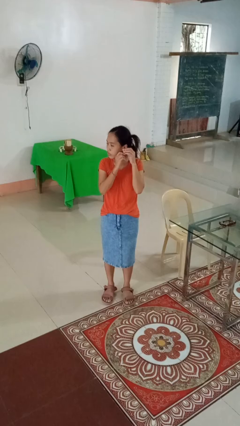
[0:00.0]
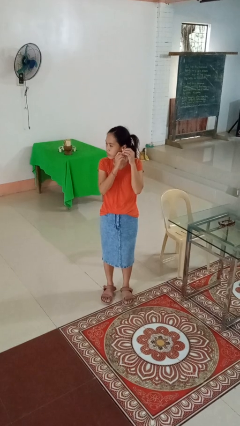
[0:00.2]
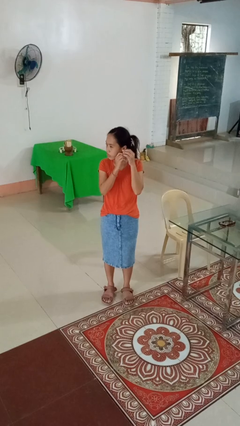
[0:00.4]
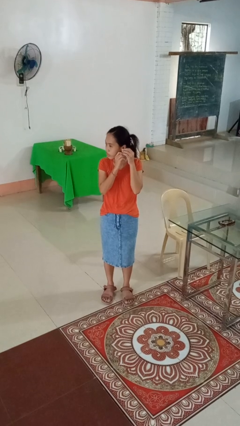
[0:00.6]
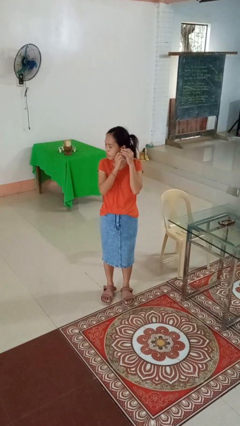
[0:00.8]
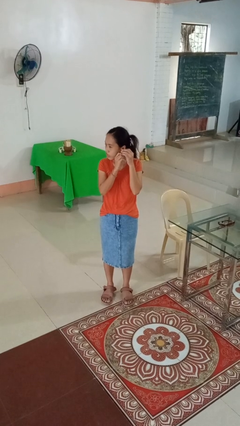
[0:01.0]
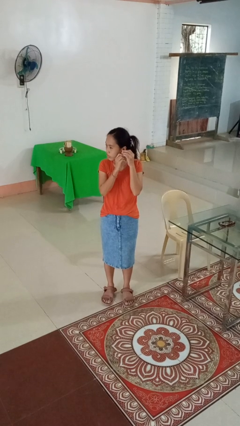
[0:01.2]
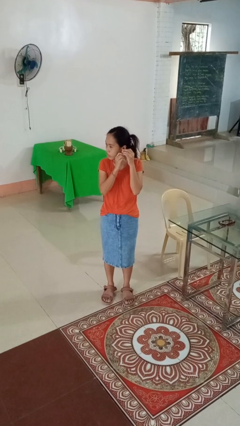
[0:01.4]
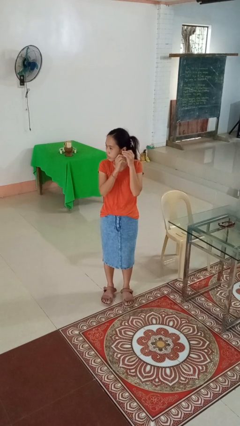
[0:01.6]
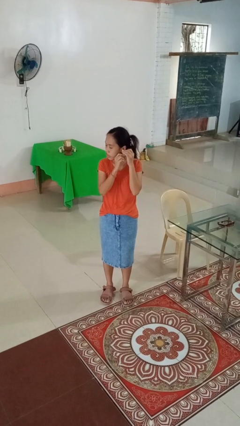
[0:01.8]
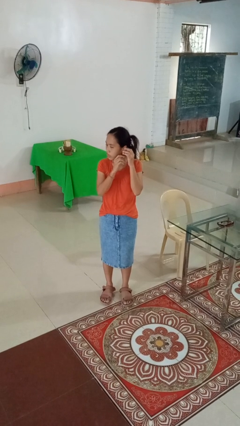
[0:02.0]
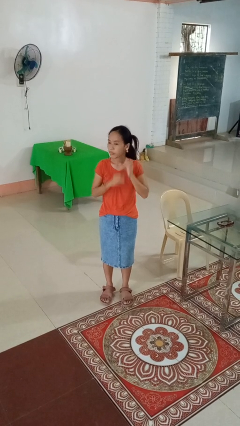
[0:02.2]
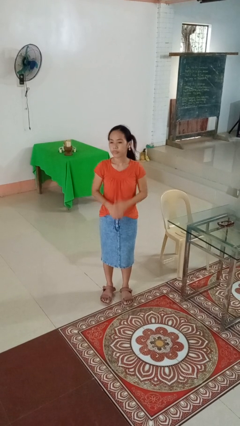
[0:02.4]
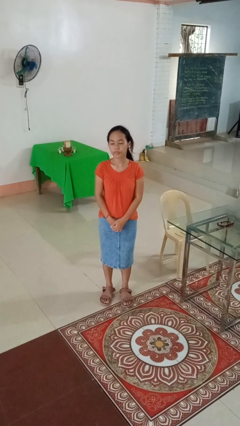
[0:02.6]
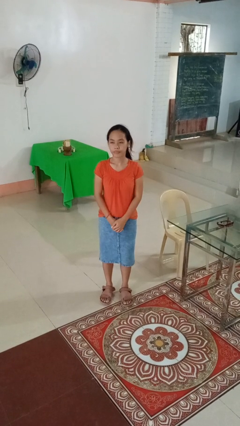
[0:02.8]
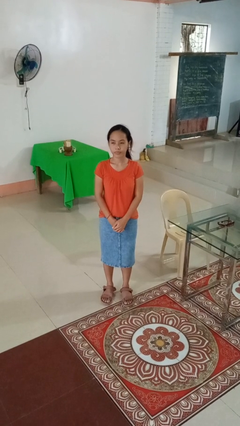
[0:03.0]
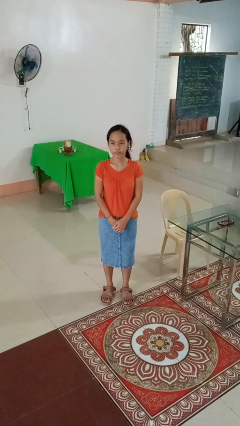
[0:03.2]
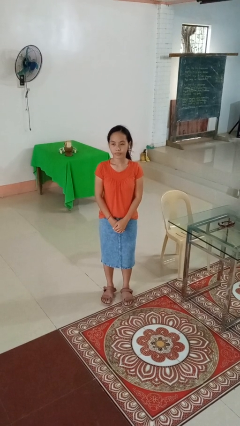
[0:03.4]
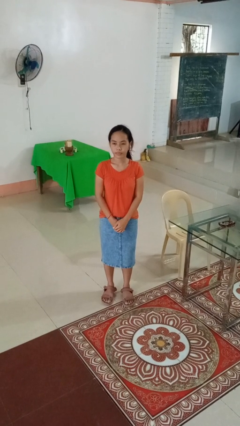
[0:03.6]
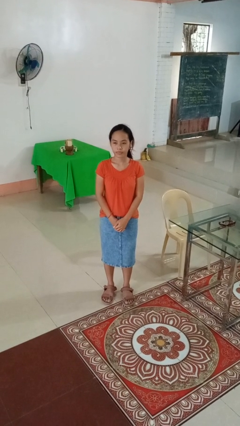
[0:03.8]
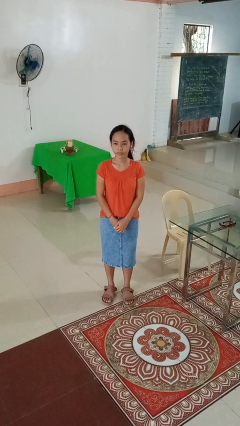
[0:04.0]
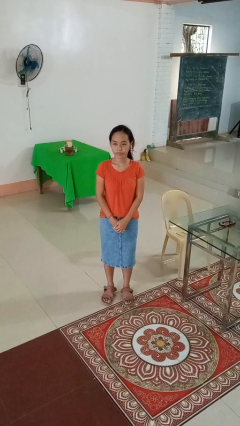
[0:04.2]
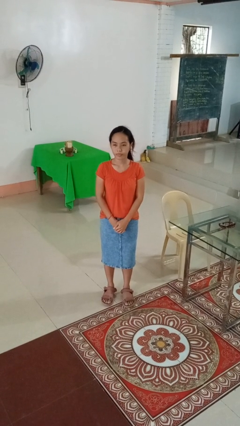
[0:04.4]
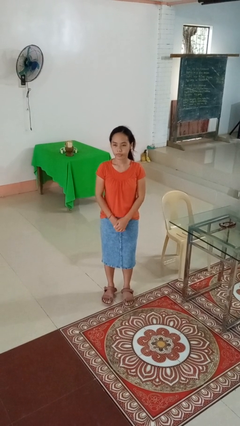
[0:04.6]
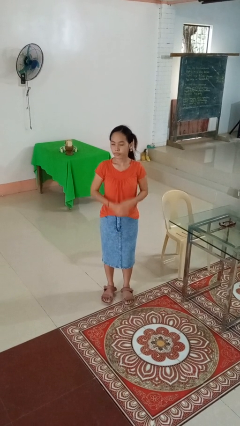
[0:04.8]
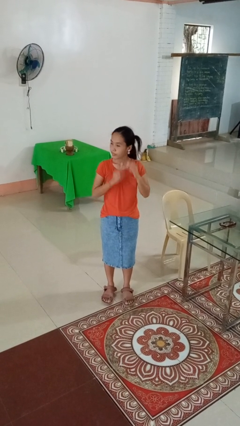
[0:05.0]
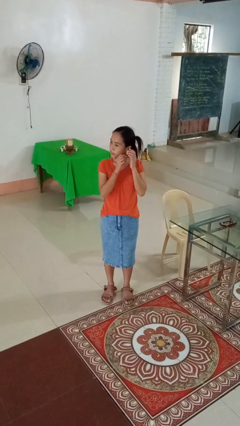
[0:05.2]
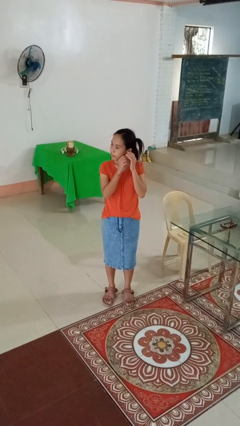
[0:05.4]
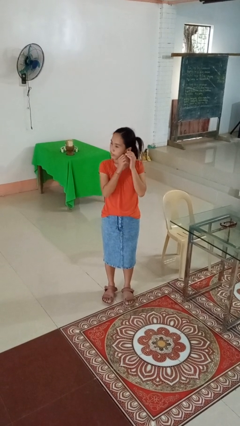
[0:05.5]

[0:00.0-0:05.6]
person puts on earrings

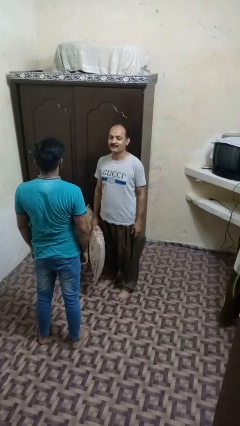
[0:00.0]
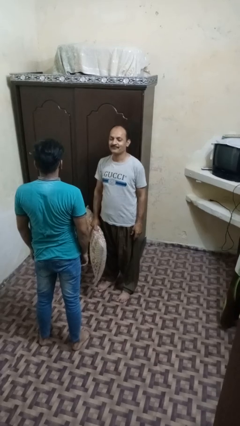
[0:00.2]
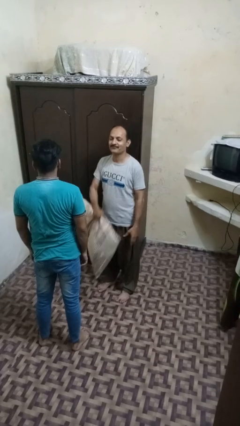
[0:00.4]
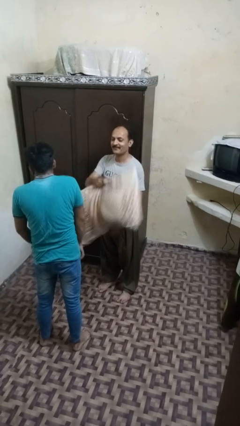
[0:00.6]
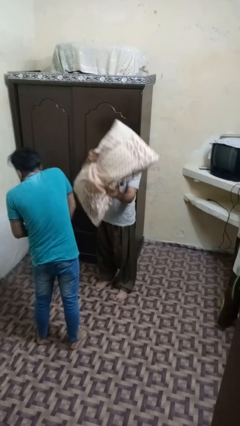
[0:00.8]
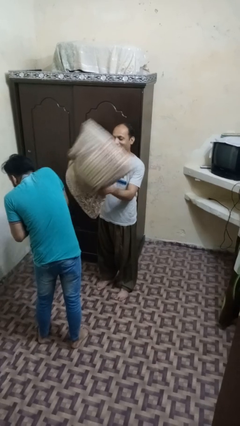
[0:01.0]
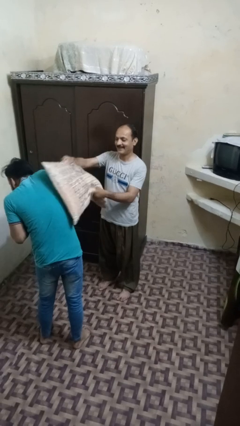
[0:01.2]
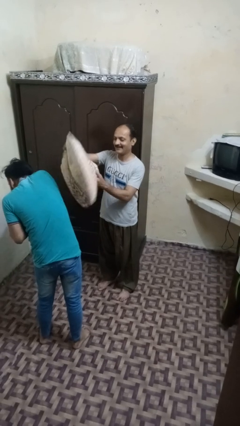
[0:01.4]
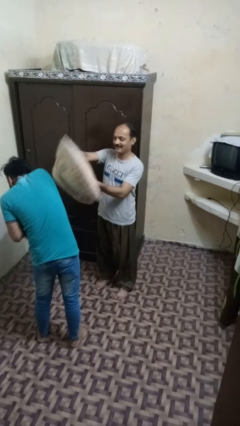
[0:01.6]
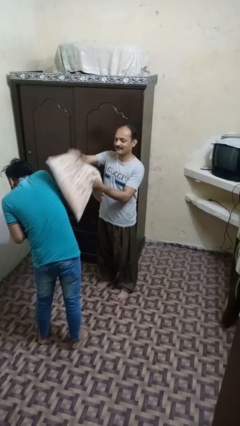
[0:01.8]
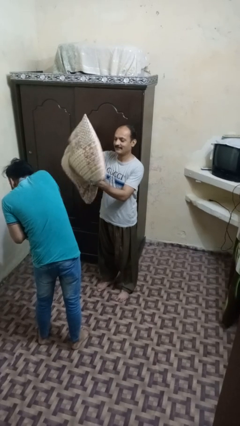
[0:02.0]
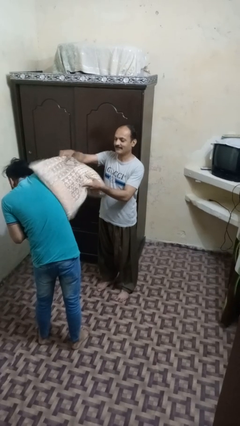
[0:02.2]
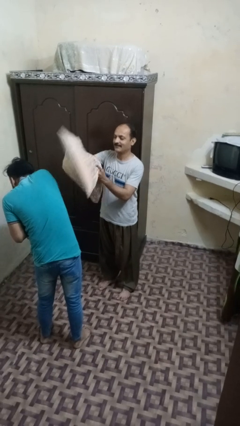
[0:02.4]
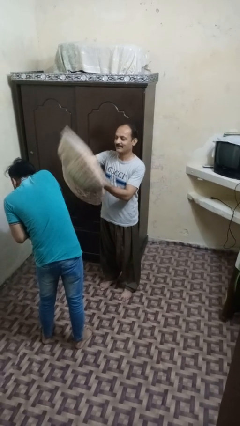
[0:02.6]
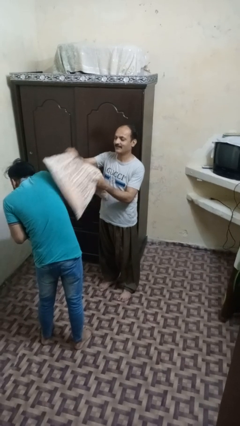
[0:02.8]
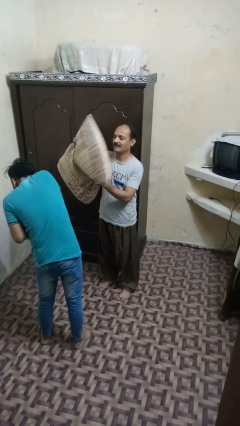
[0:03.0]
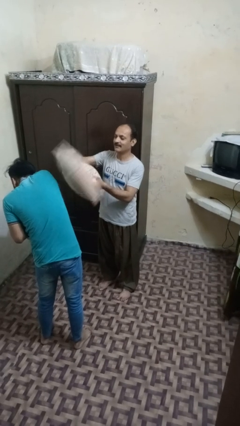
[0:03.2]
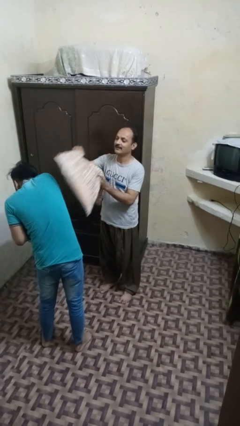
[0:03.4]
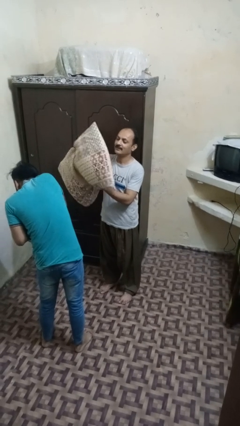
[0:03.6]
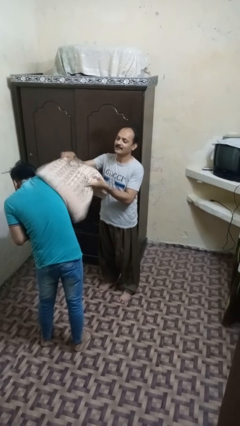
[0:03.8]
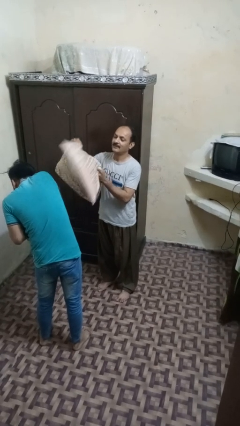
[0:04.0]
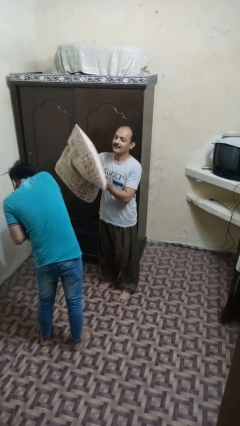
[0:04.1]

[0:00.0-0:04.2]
person hits person with pillow

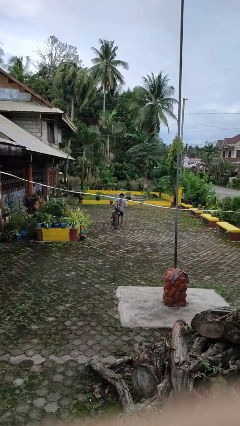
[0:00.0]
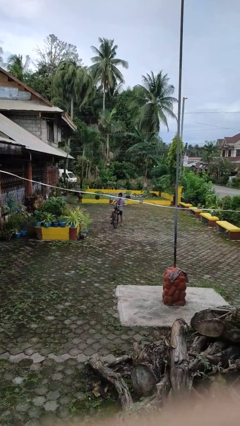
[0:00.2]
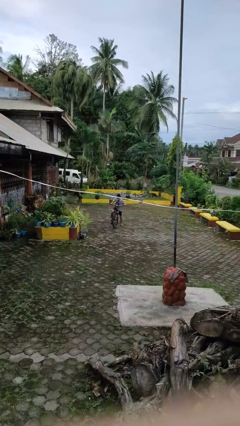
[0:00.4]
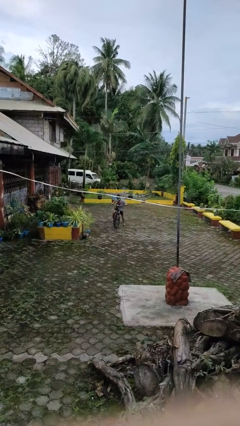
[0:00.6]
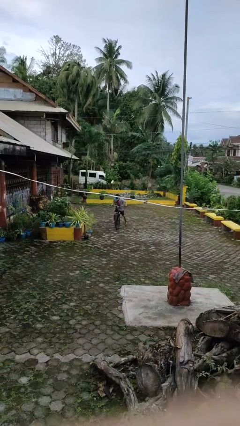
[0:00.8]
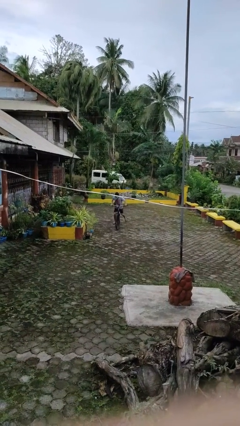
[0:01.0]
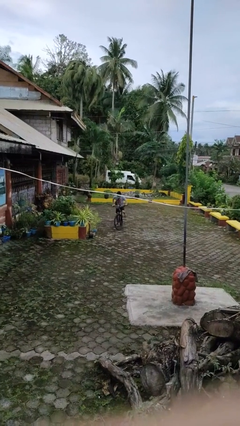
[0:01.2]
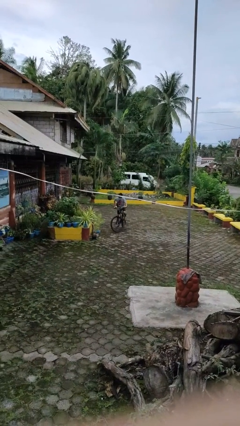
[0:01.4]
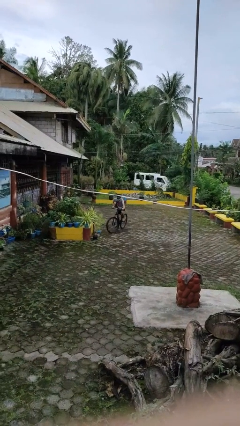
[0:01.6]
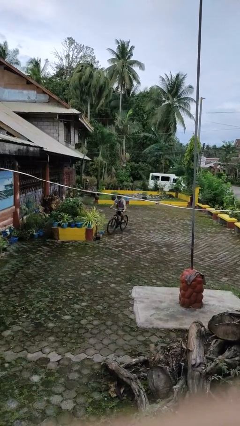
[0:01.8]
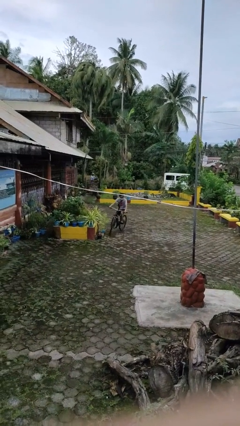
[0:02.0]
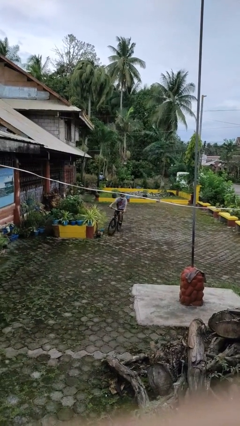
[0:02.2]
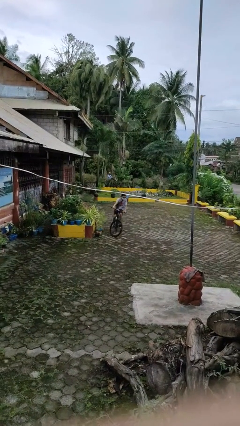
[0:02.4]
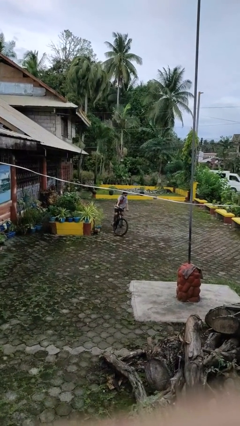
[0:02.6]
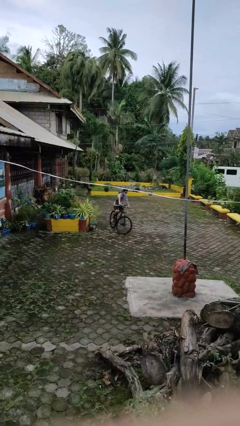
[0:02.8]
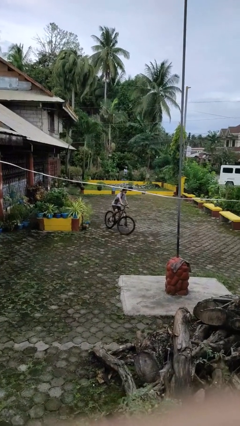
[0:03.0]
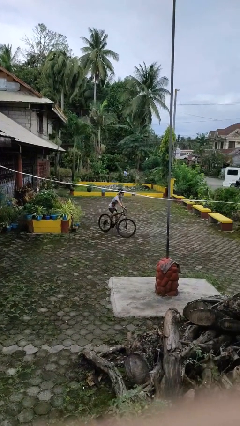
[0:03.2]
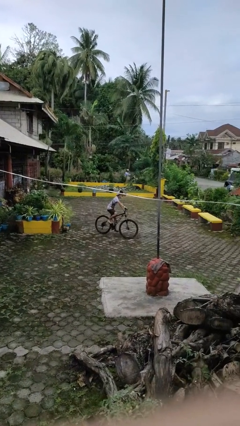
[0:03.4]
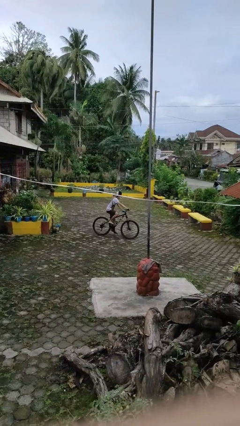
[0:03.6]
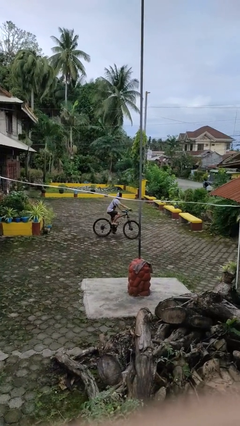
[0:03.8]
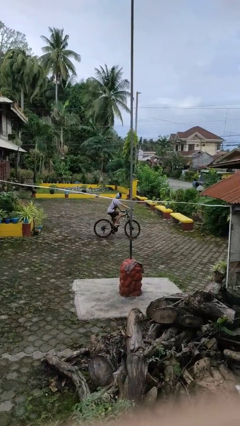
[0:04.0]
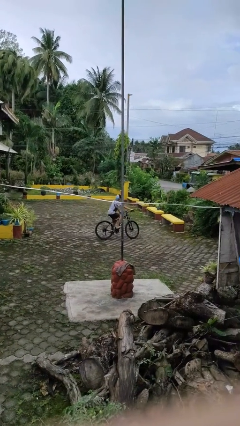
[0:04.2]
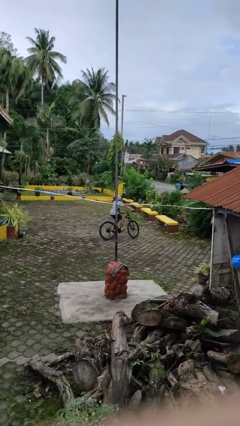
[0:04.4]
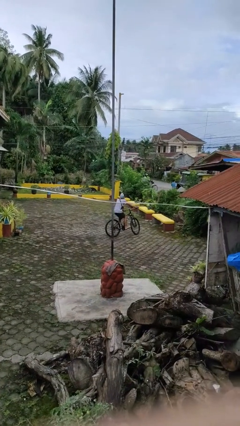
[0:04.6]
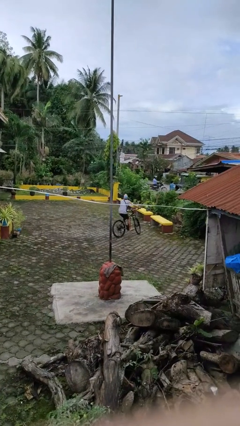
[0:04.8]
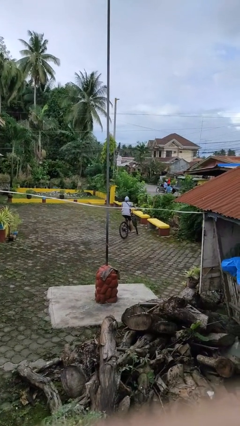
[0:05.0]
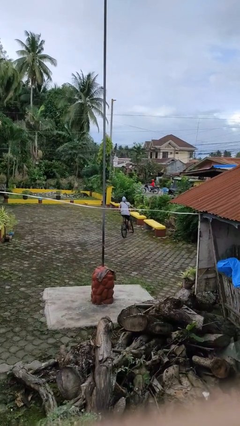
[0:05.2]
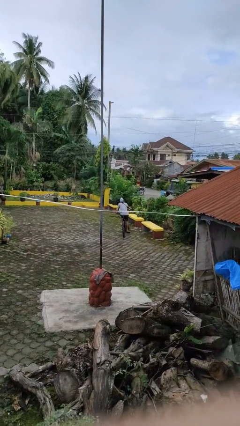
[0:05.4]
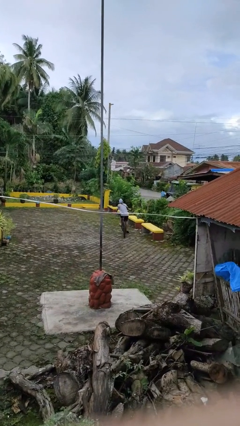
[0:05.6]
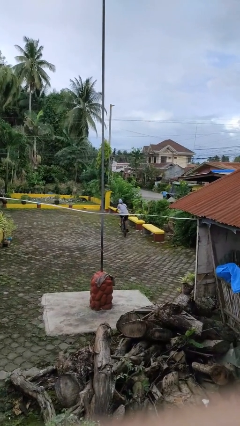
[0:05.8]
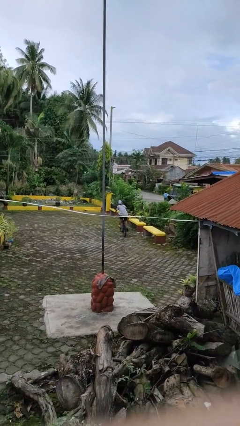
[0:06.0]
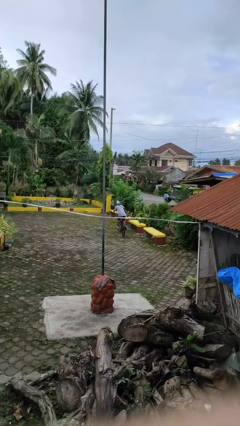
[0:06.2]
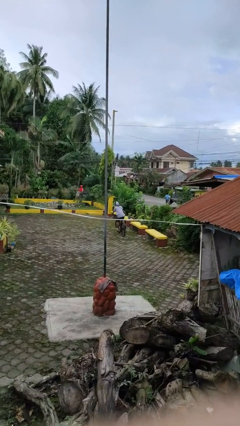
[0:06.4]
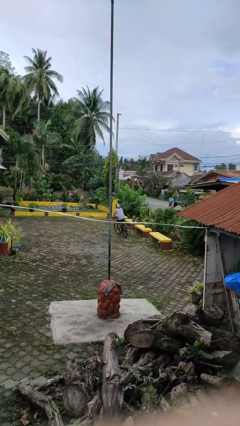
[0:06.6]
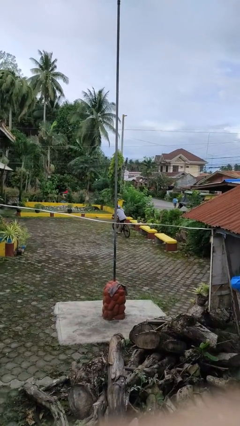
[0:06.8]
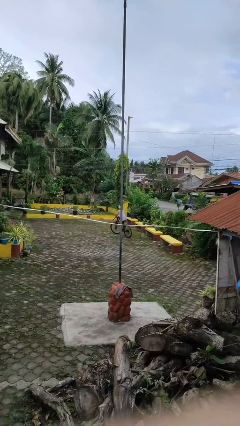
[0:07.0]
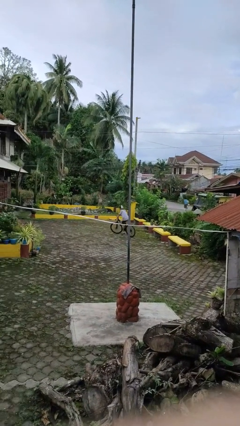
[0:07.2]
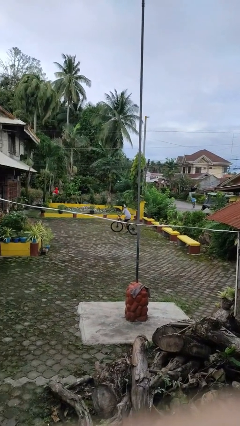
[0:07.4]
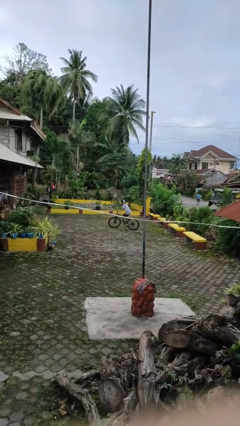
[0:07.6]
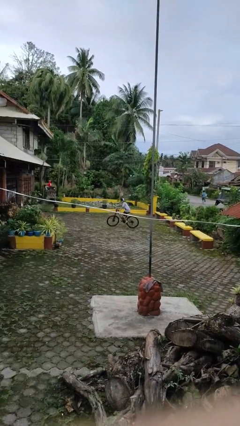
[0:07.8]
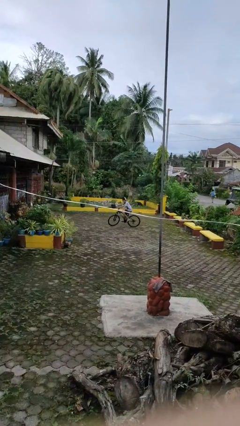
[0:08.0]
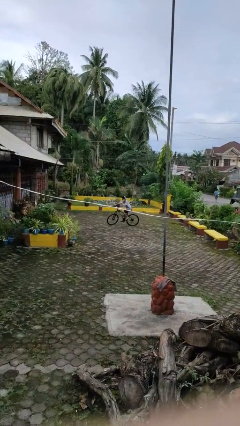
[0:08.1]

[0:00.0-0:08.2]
person rides bicycle

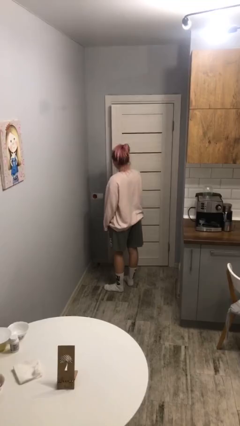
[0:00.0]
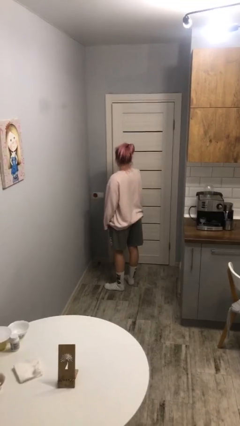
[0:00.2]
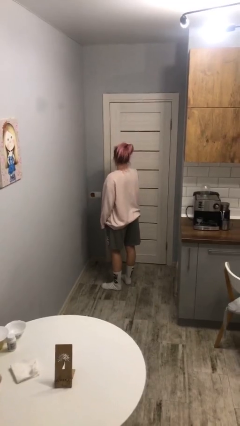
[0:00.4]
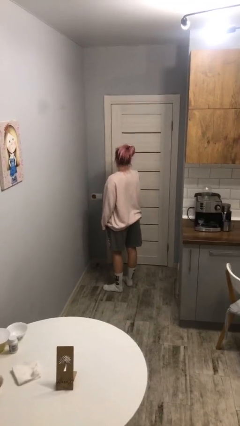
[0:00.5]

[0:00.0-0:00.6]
person closes facility door
